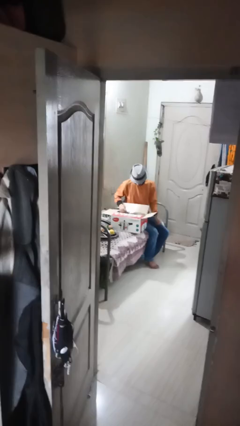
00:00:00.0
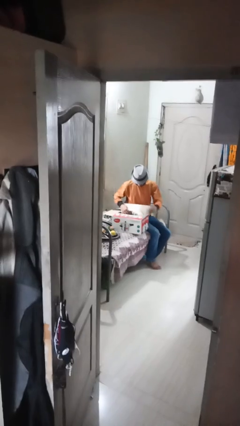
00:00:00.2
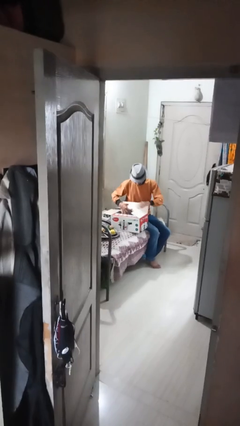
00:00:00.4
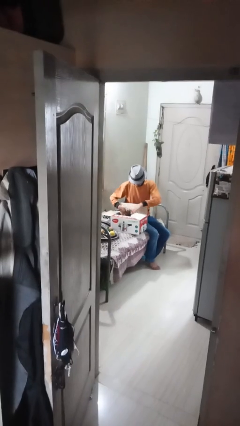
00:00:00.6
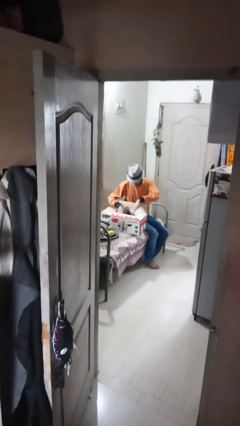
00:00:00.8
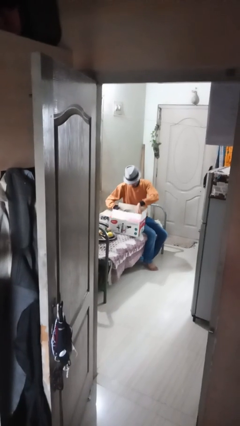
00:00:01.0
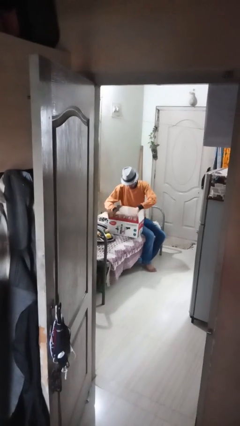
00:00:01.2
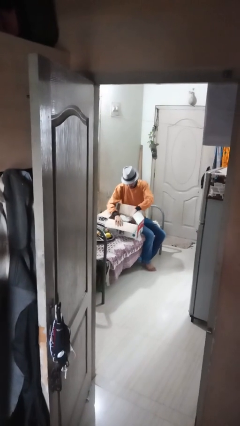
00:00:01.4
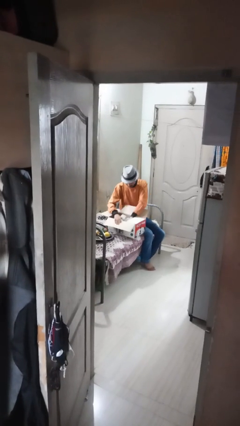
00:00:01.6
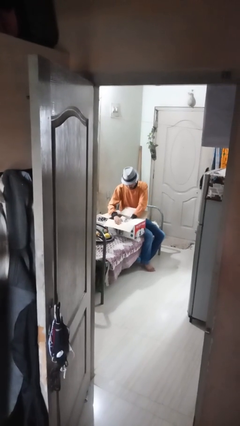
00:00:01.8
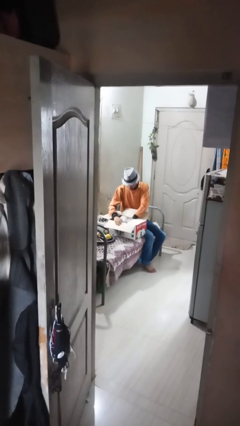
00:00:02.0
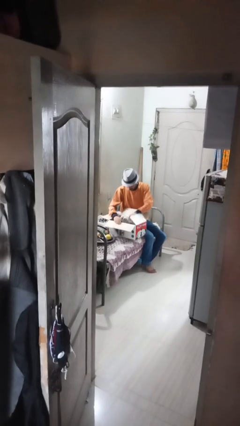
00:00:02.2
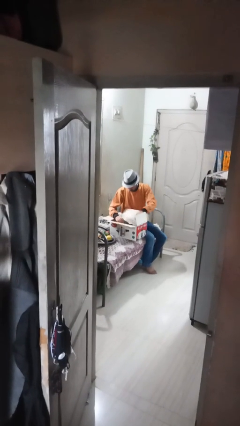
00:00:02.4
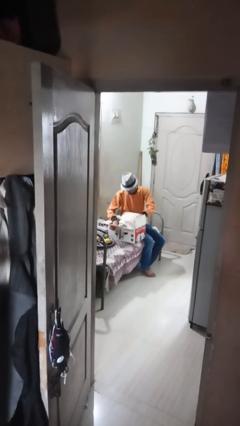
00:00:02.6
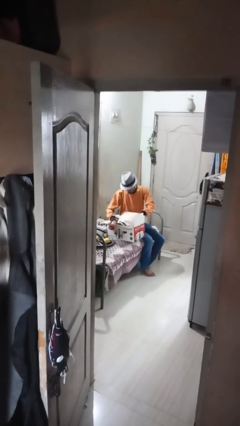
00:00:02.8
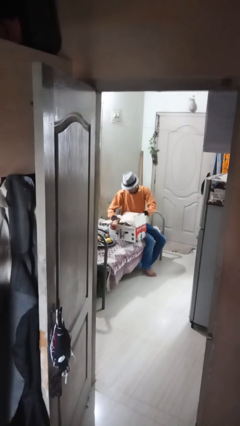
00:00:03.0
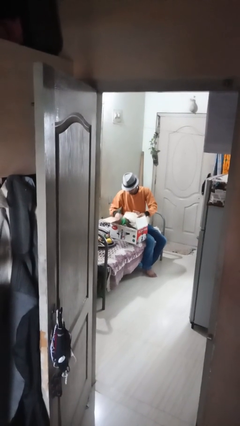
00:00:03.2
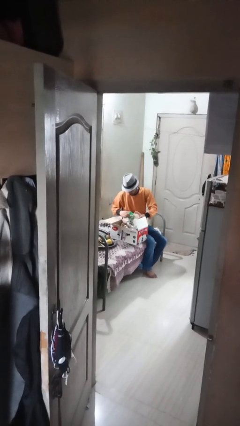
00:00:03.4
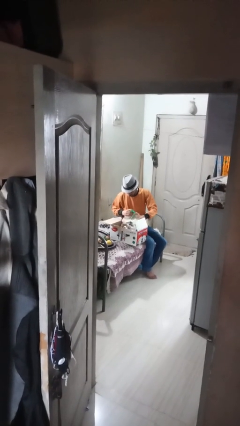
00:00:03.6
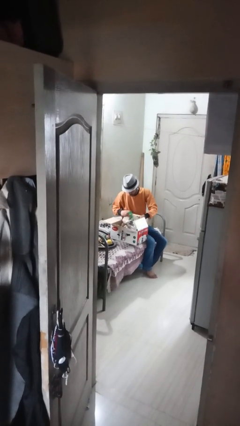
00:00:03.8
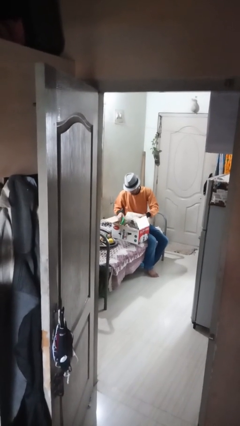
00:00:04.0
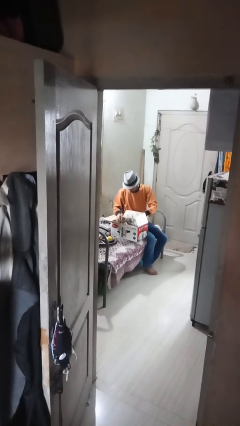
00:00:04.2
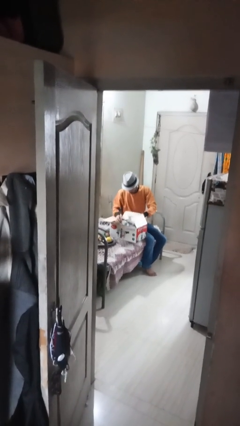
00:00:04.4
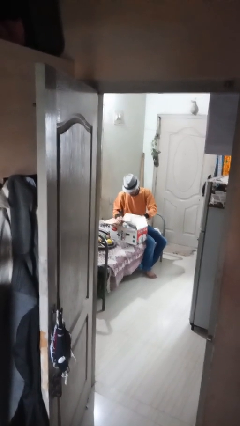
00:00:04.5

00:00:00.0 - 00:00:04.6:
person searches in box

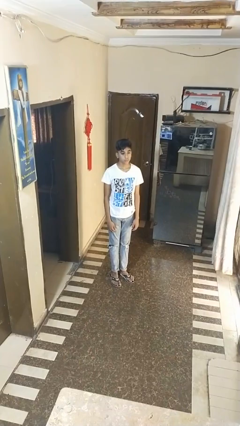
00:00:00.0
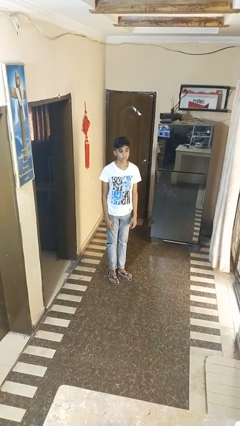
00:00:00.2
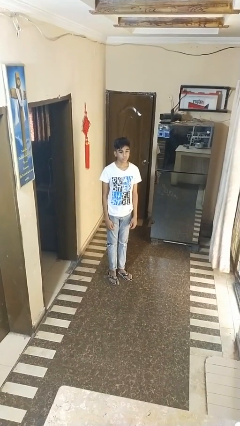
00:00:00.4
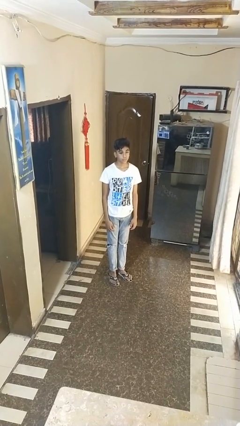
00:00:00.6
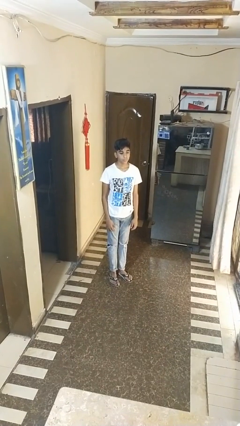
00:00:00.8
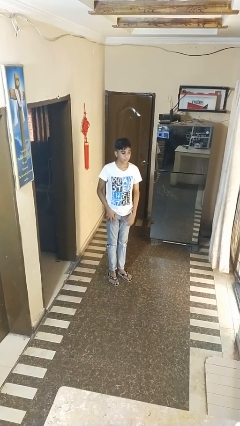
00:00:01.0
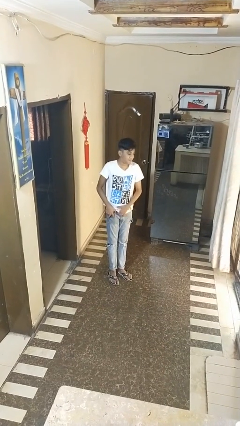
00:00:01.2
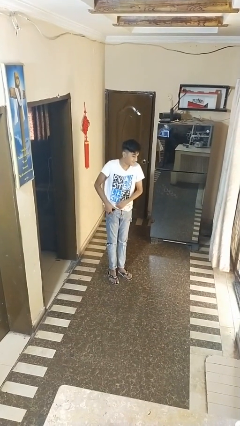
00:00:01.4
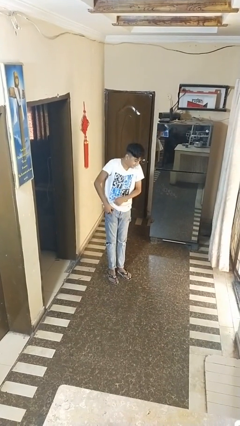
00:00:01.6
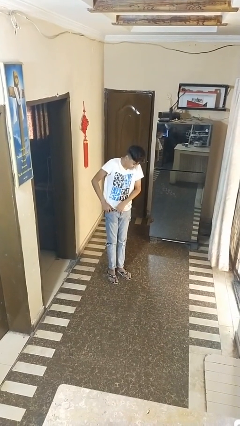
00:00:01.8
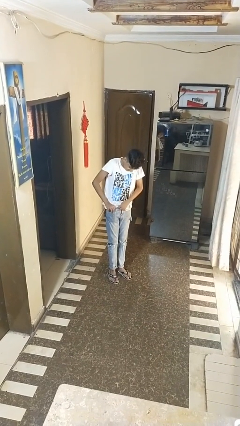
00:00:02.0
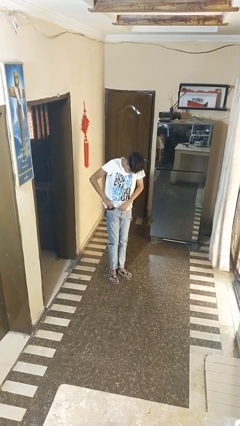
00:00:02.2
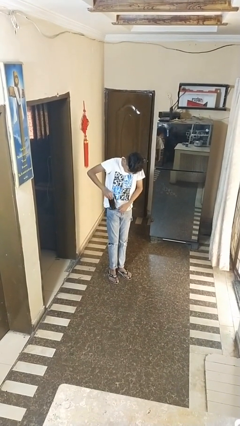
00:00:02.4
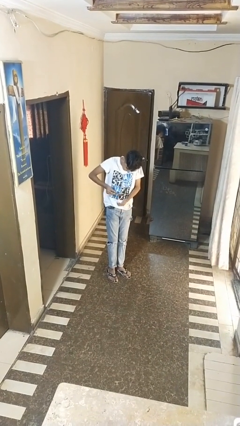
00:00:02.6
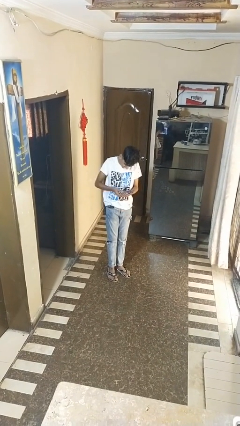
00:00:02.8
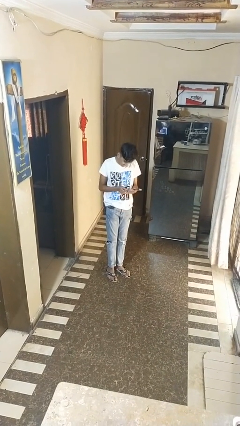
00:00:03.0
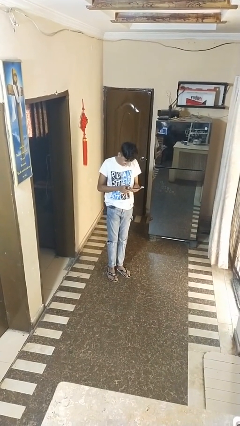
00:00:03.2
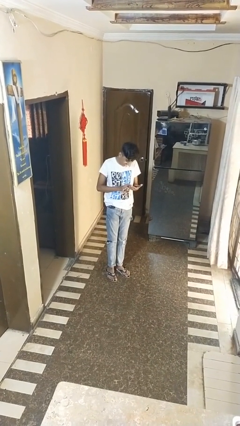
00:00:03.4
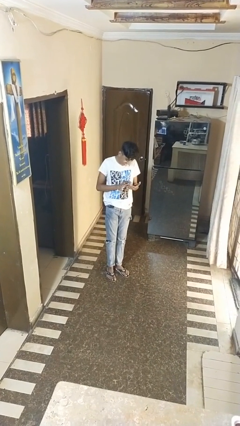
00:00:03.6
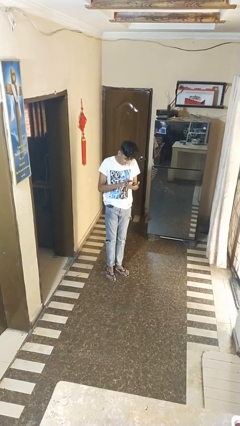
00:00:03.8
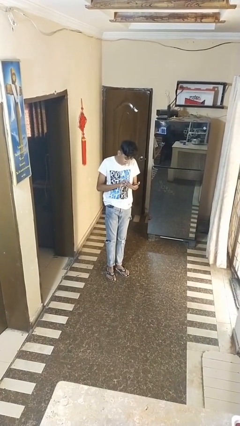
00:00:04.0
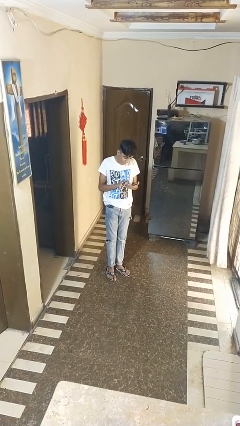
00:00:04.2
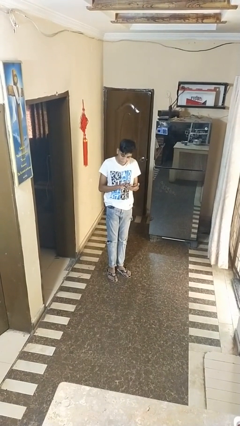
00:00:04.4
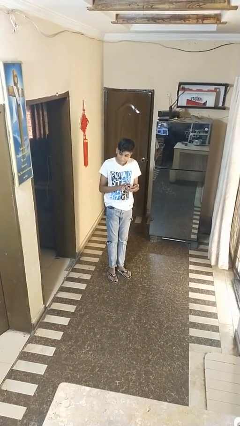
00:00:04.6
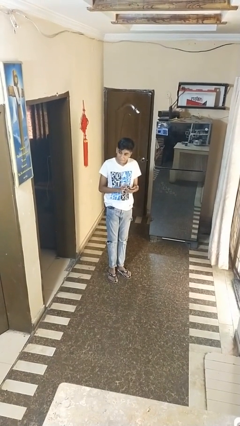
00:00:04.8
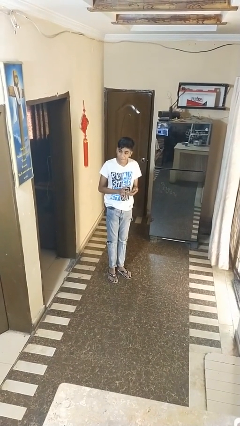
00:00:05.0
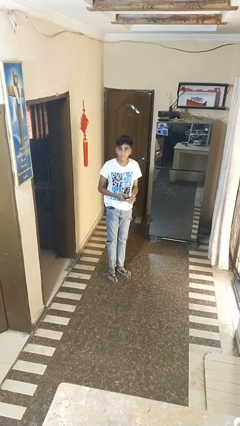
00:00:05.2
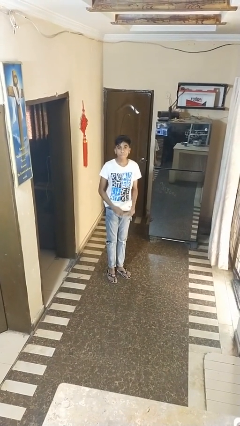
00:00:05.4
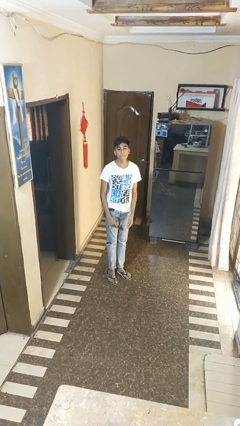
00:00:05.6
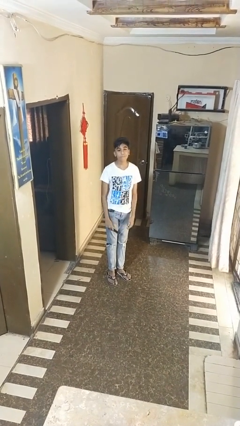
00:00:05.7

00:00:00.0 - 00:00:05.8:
person takes phone from pocket

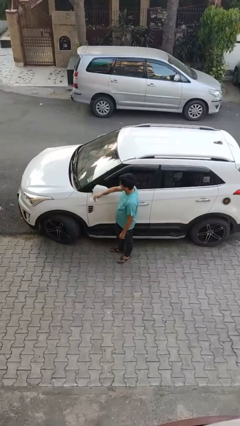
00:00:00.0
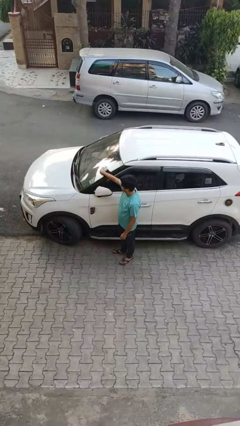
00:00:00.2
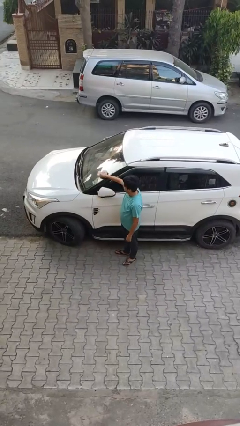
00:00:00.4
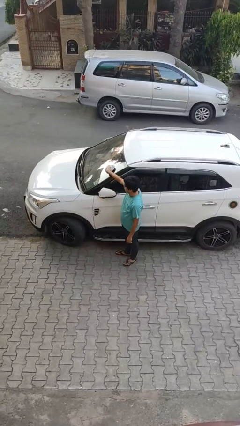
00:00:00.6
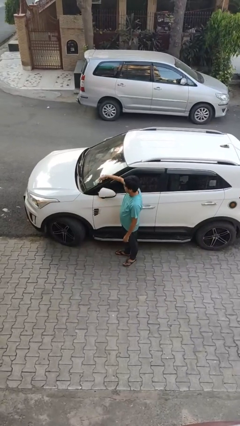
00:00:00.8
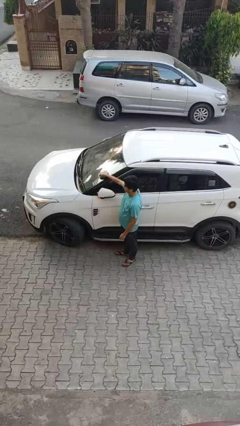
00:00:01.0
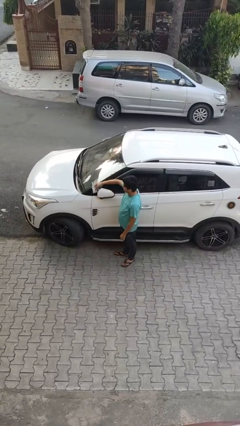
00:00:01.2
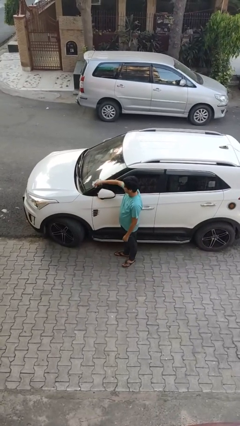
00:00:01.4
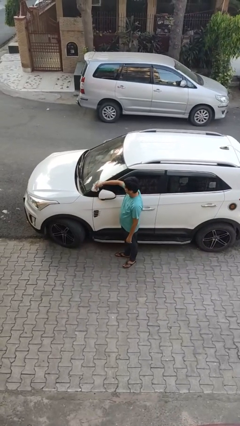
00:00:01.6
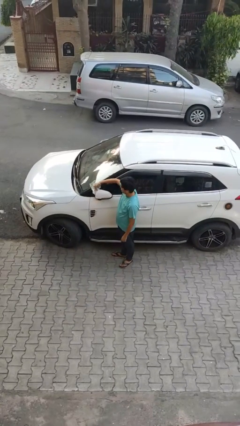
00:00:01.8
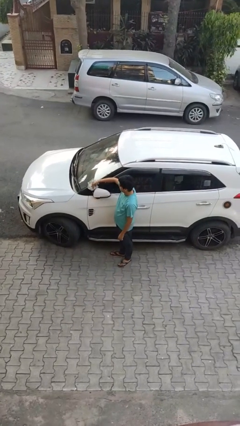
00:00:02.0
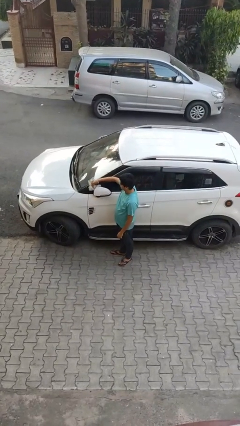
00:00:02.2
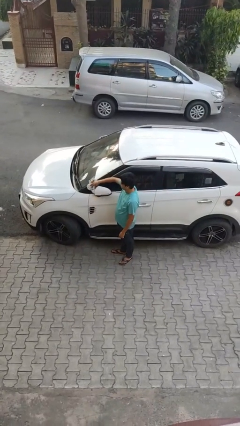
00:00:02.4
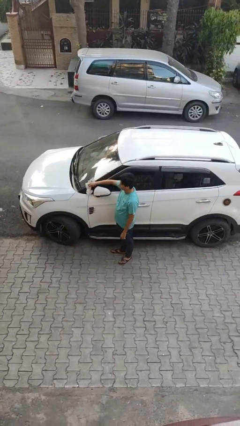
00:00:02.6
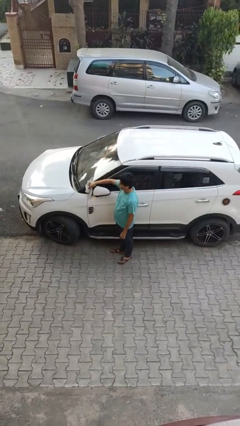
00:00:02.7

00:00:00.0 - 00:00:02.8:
person polishes car with rag

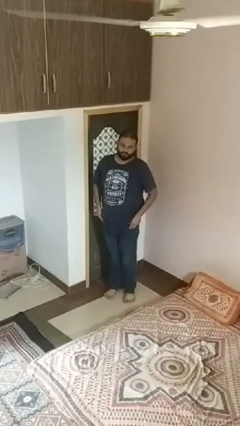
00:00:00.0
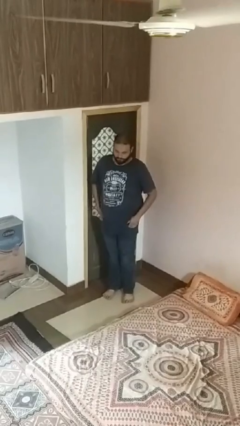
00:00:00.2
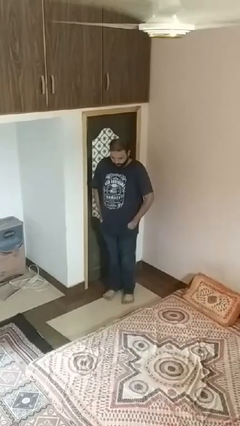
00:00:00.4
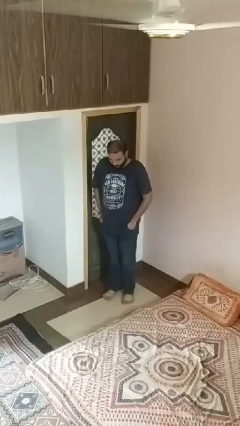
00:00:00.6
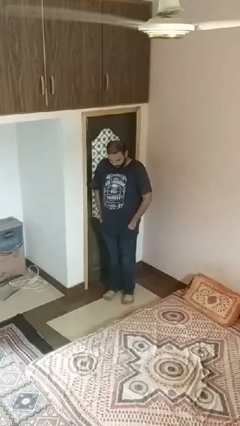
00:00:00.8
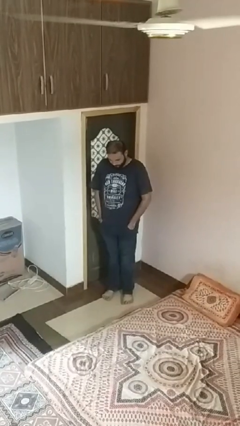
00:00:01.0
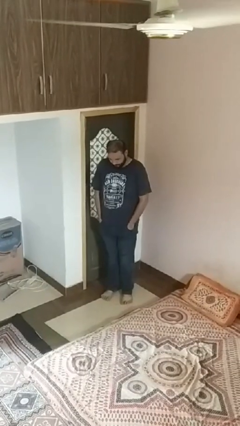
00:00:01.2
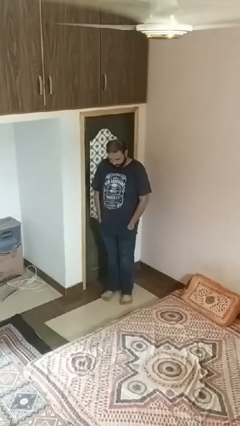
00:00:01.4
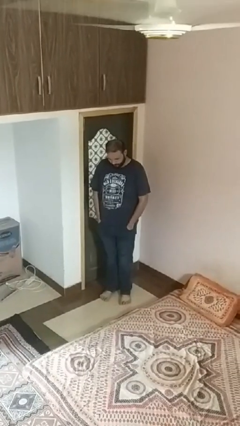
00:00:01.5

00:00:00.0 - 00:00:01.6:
person puts hands in back pockets

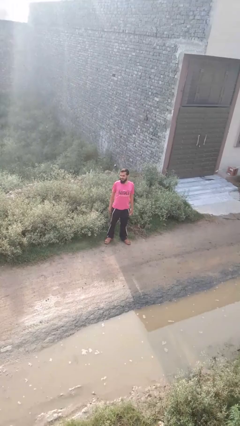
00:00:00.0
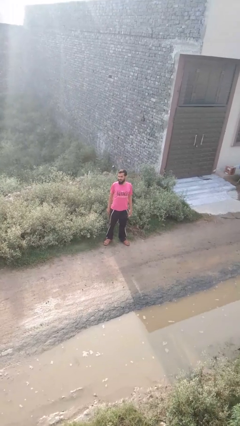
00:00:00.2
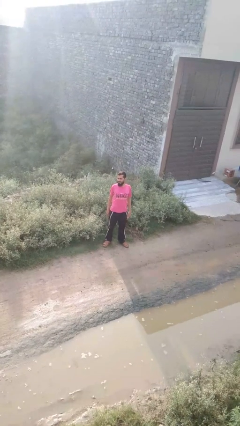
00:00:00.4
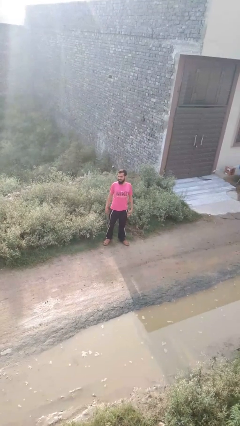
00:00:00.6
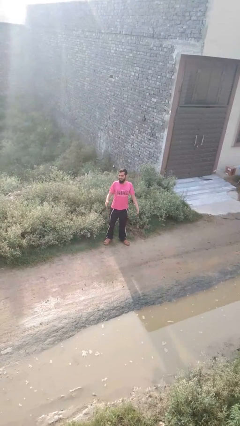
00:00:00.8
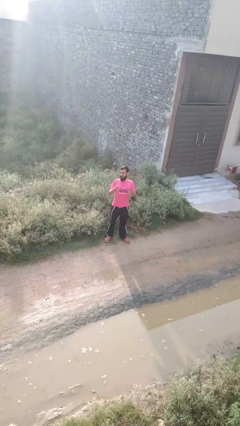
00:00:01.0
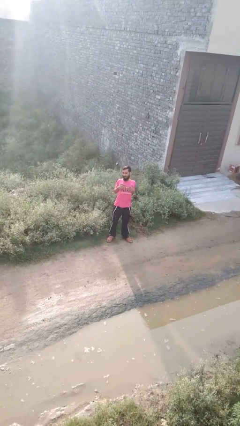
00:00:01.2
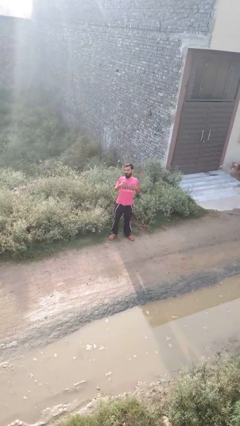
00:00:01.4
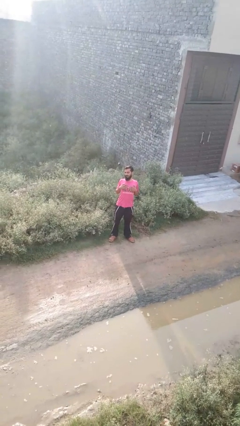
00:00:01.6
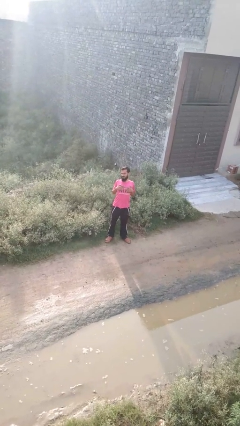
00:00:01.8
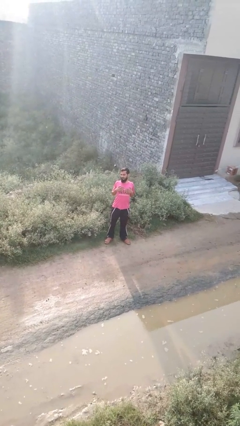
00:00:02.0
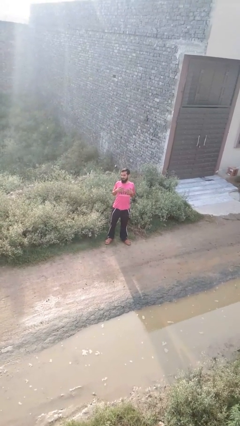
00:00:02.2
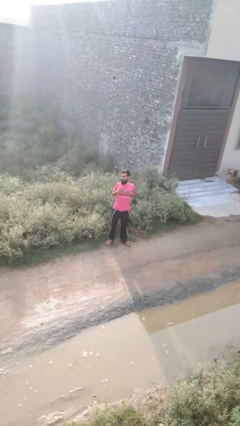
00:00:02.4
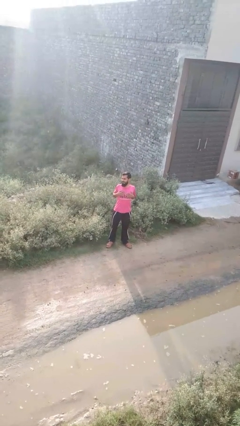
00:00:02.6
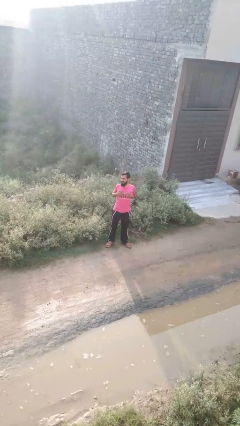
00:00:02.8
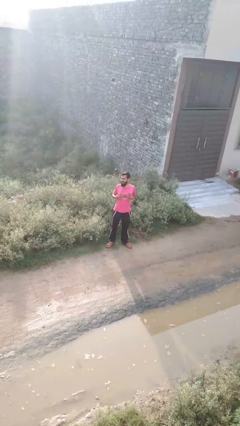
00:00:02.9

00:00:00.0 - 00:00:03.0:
person drums on chest
